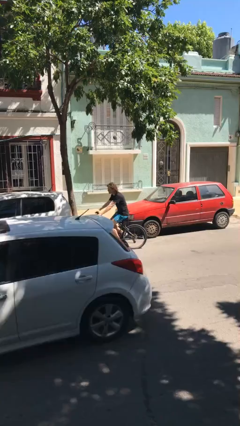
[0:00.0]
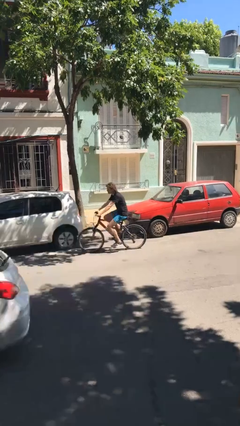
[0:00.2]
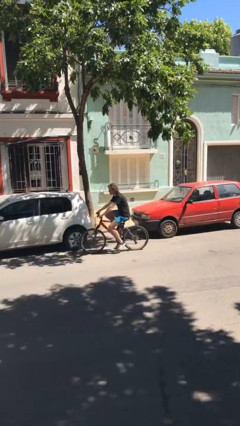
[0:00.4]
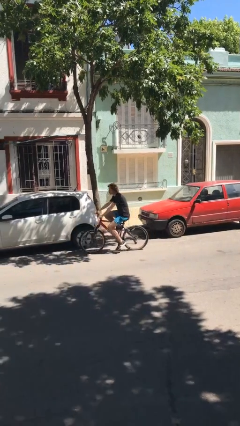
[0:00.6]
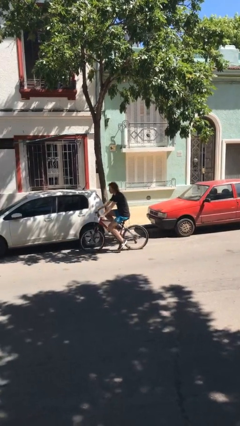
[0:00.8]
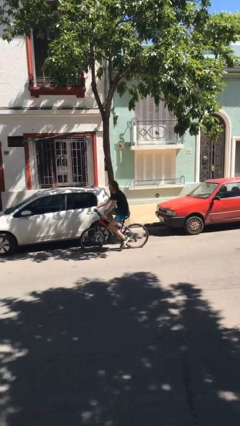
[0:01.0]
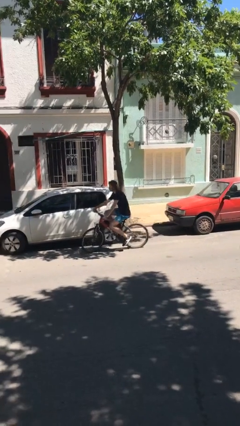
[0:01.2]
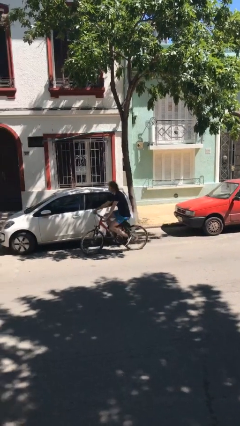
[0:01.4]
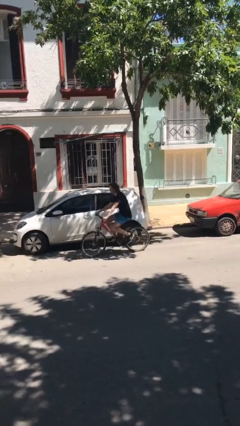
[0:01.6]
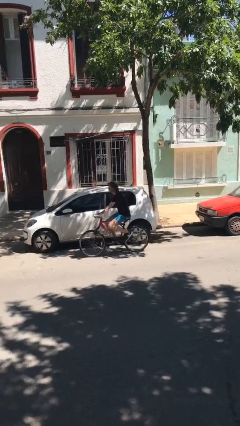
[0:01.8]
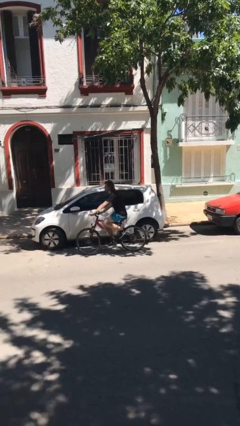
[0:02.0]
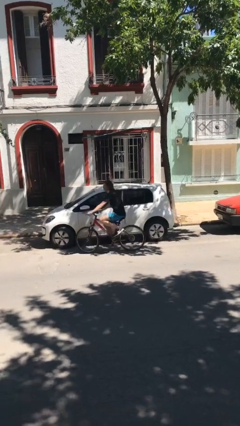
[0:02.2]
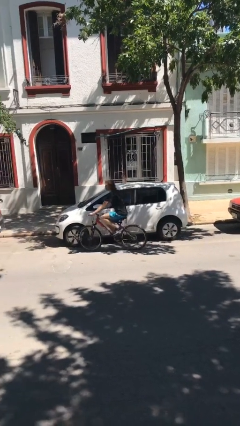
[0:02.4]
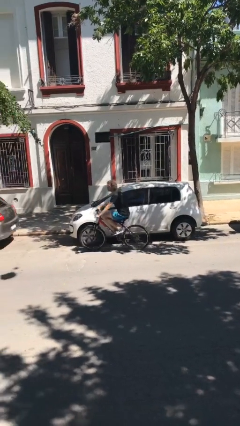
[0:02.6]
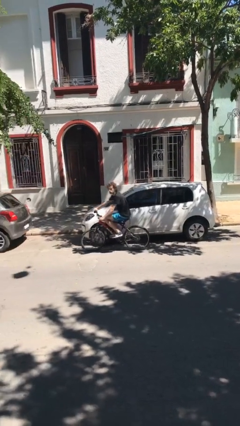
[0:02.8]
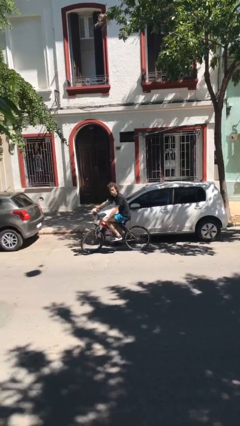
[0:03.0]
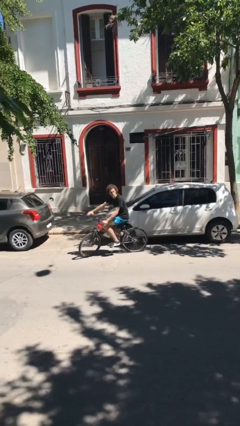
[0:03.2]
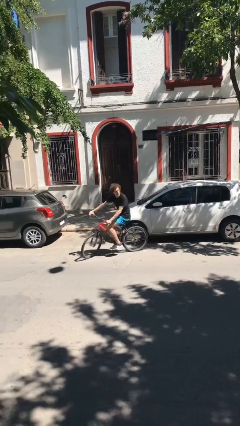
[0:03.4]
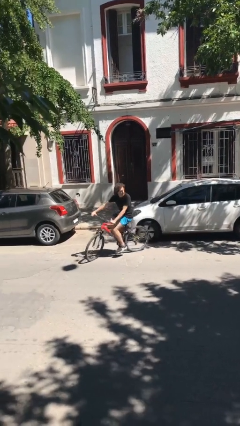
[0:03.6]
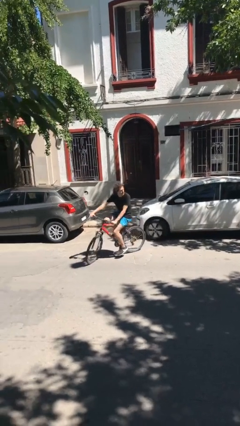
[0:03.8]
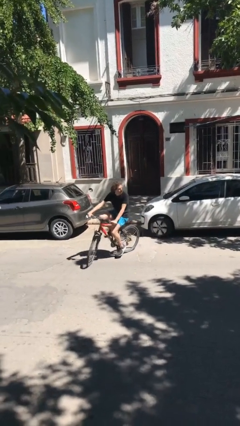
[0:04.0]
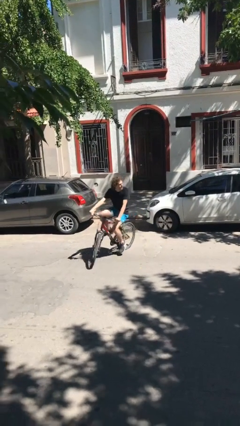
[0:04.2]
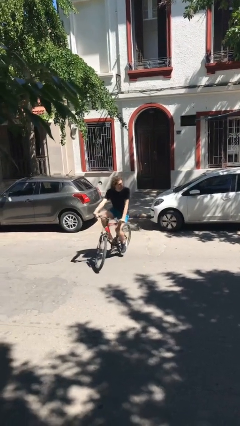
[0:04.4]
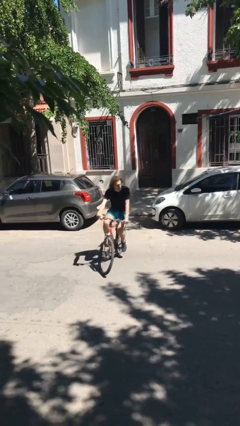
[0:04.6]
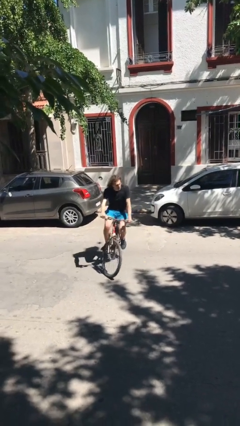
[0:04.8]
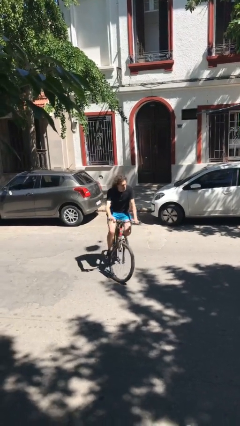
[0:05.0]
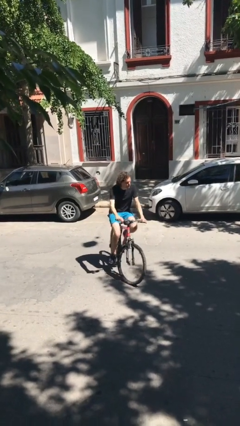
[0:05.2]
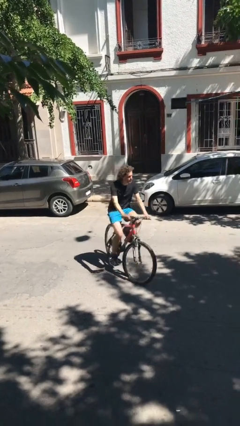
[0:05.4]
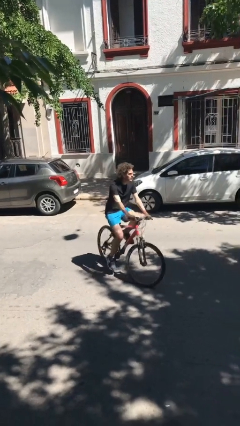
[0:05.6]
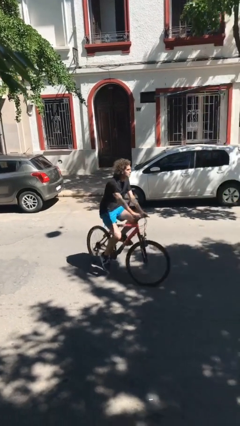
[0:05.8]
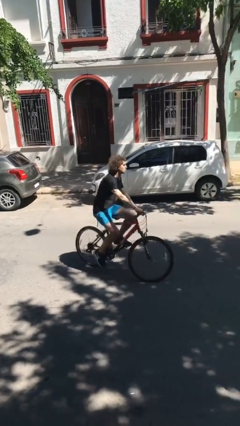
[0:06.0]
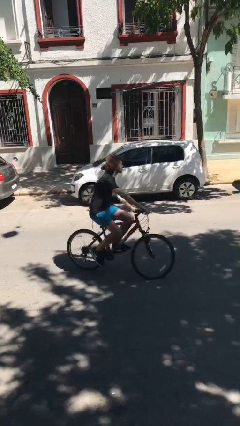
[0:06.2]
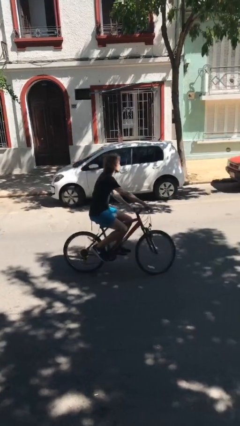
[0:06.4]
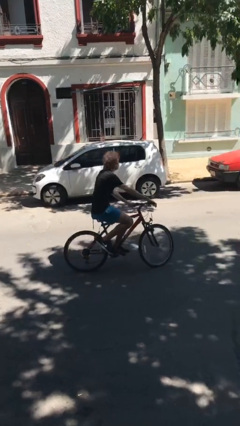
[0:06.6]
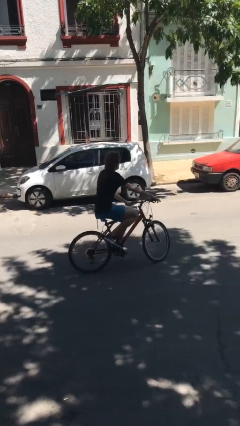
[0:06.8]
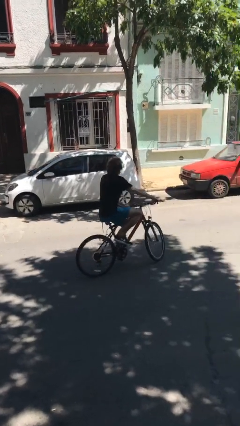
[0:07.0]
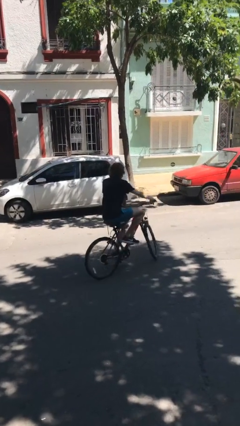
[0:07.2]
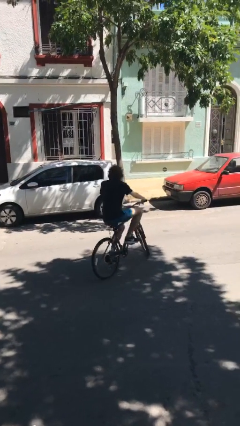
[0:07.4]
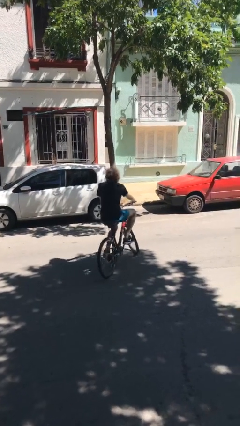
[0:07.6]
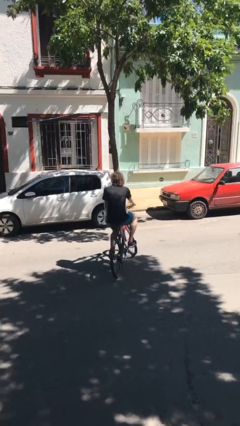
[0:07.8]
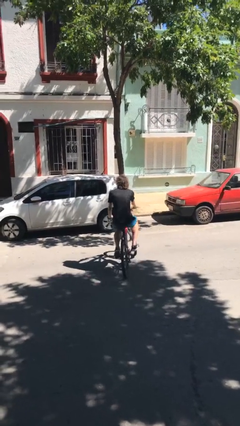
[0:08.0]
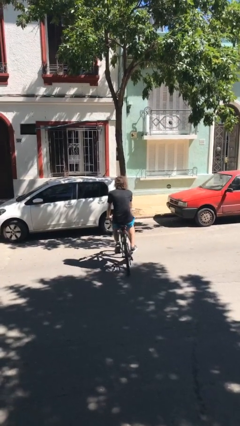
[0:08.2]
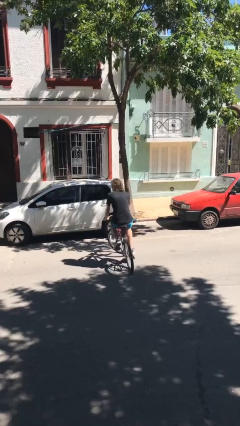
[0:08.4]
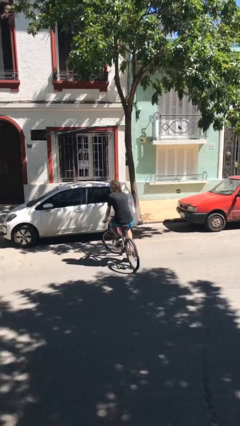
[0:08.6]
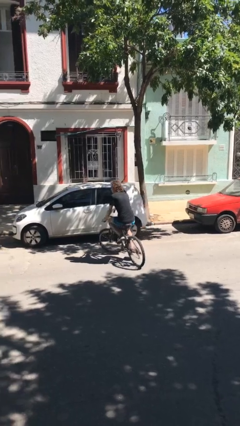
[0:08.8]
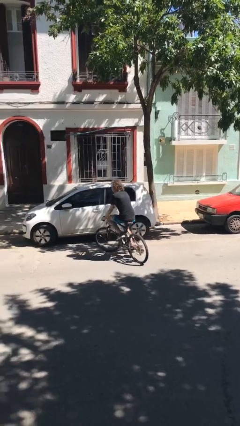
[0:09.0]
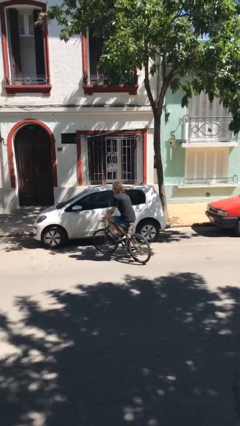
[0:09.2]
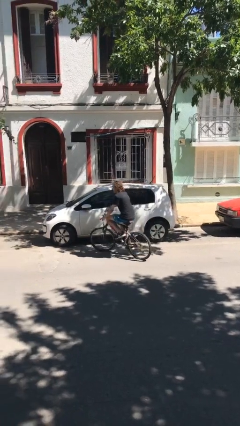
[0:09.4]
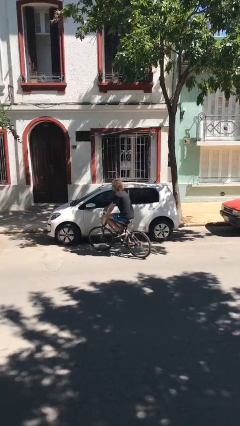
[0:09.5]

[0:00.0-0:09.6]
person rides bicycle

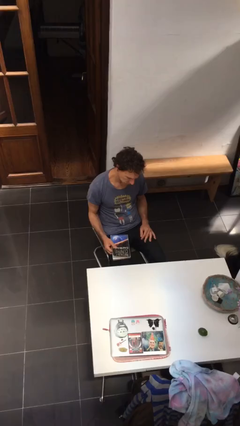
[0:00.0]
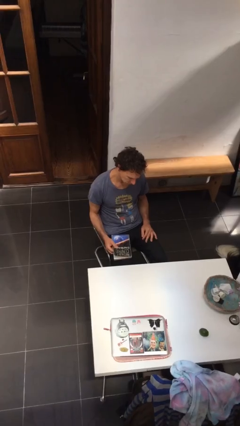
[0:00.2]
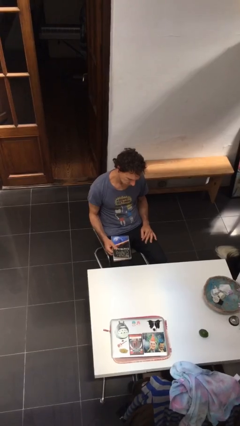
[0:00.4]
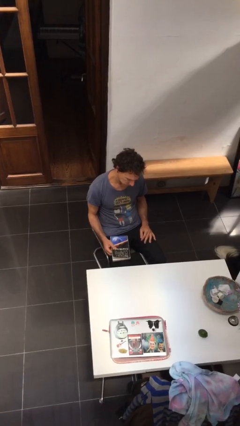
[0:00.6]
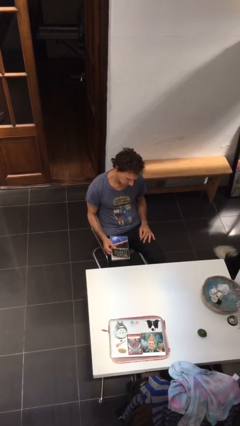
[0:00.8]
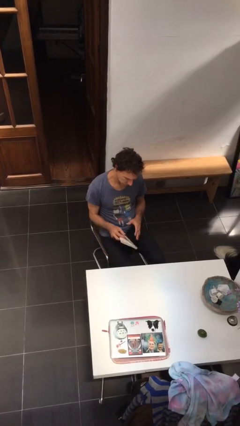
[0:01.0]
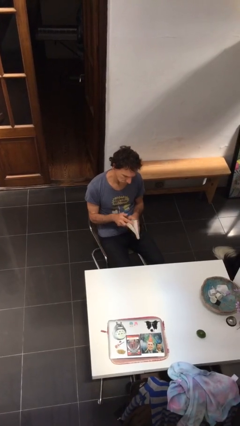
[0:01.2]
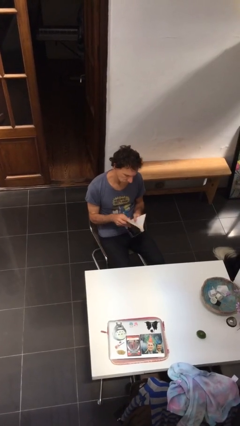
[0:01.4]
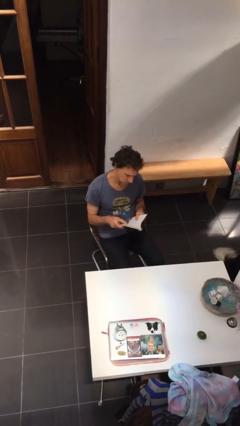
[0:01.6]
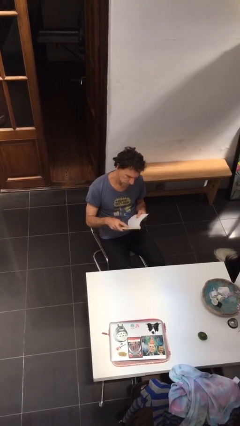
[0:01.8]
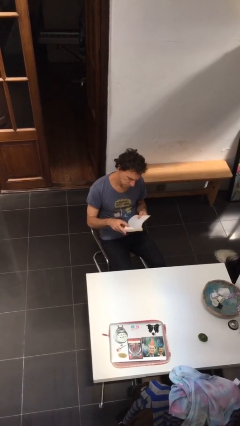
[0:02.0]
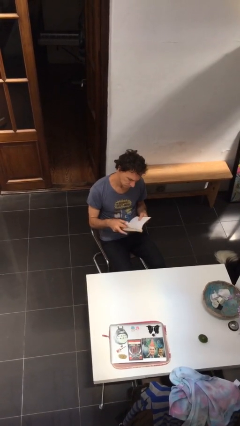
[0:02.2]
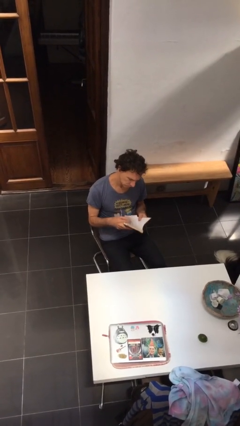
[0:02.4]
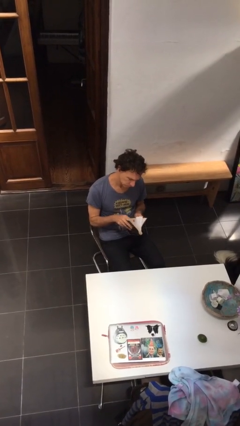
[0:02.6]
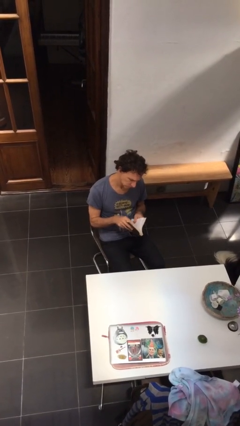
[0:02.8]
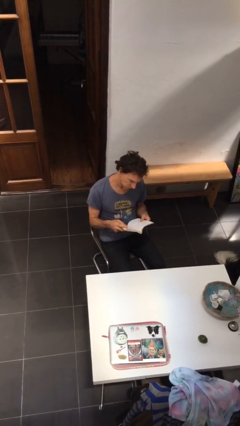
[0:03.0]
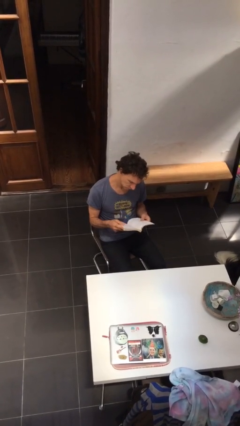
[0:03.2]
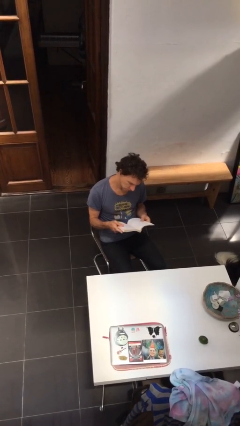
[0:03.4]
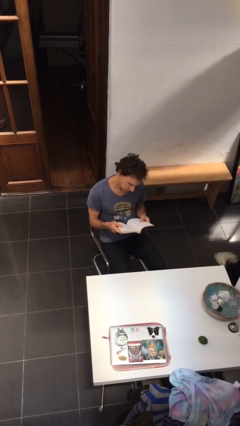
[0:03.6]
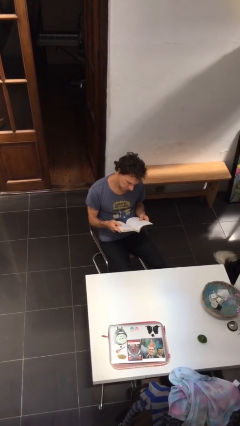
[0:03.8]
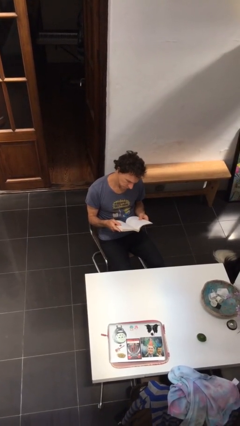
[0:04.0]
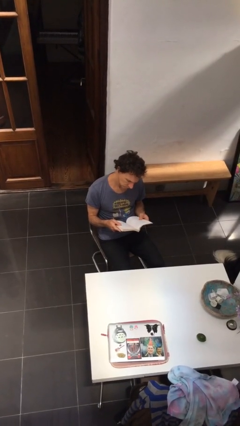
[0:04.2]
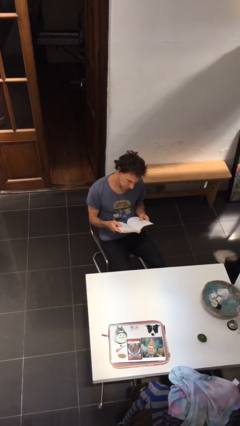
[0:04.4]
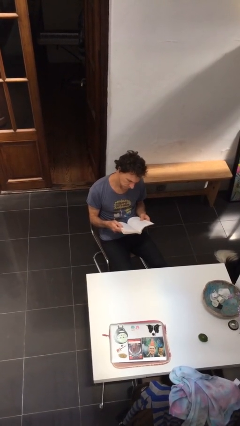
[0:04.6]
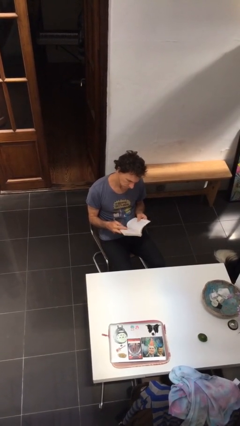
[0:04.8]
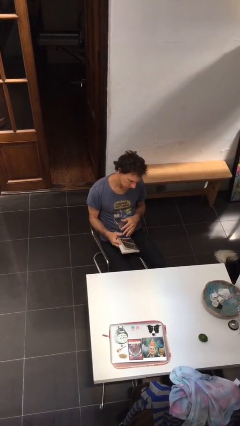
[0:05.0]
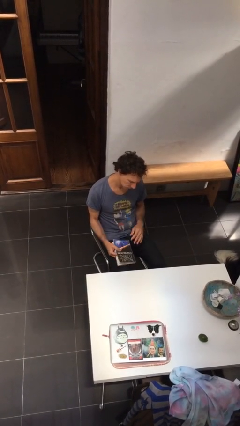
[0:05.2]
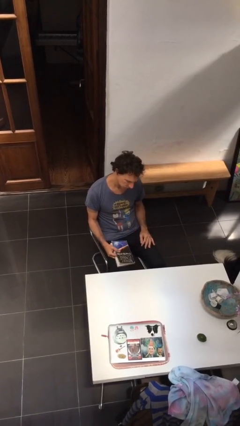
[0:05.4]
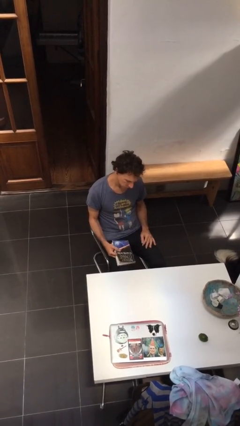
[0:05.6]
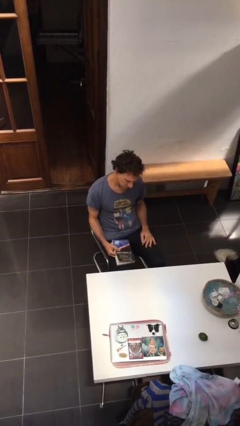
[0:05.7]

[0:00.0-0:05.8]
person reads document

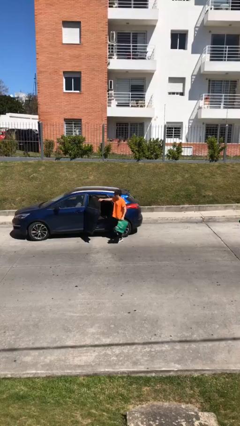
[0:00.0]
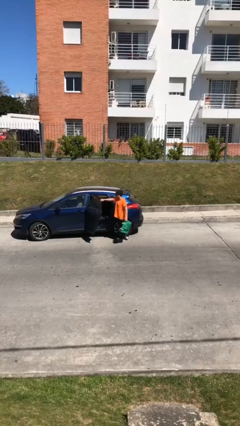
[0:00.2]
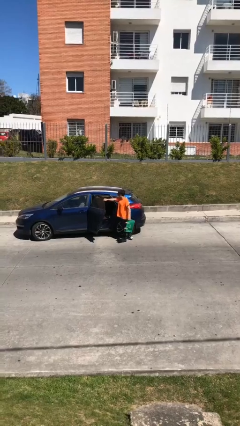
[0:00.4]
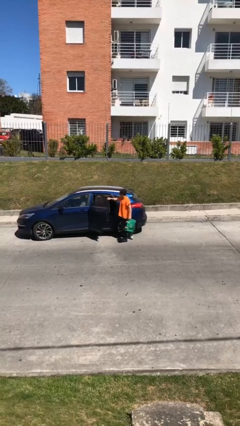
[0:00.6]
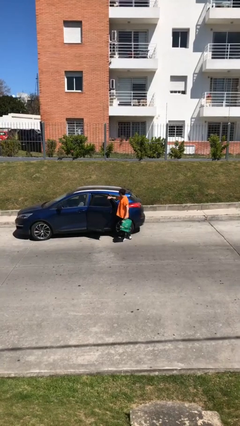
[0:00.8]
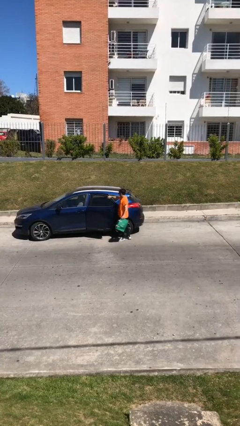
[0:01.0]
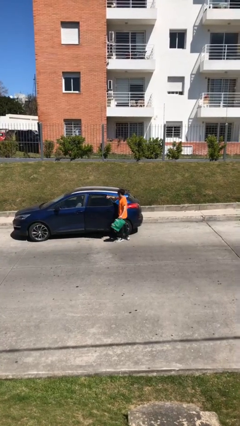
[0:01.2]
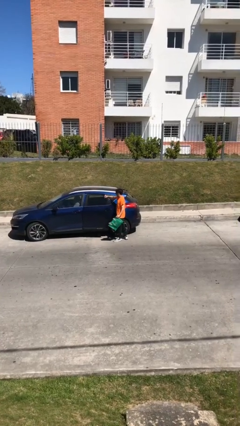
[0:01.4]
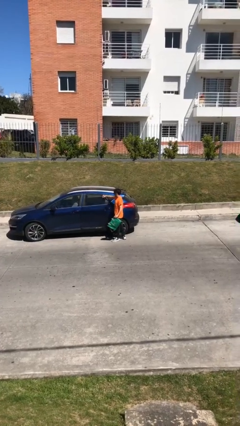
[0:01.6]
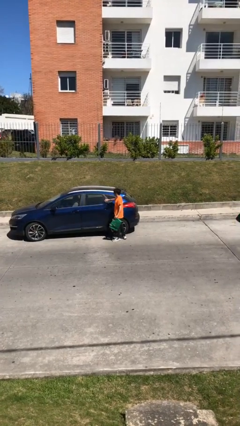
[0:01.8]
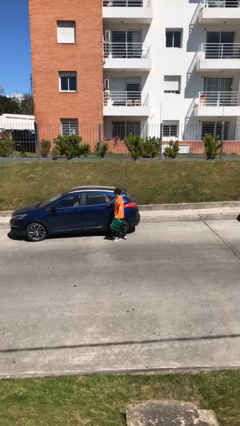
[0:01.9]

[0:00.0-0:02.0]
person closes car door

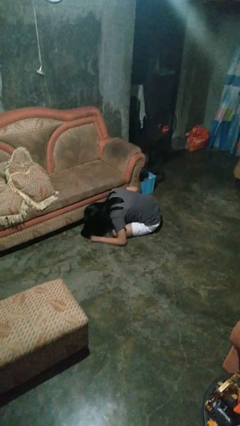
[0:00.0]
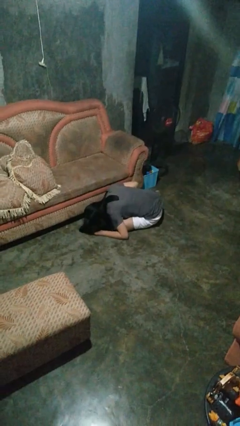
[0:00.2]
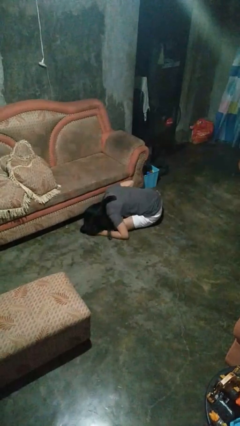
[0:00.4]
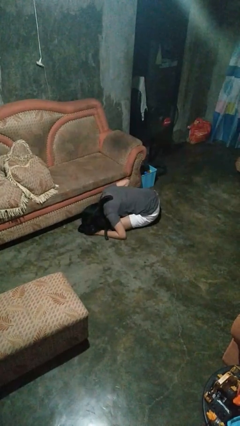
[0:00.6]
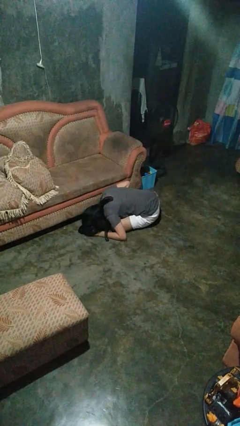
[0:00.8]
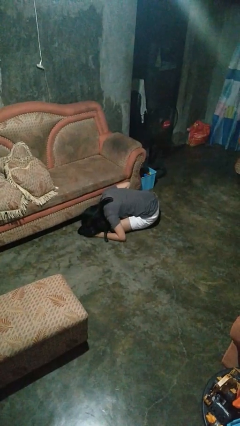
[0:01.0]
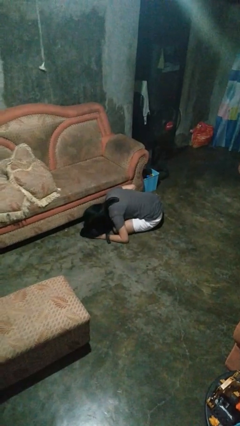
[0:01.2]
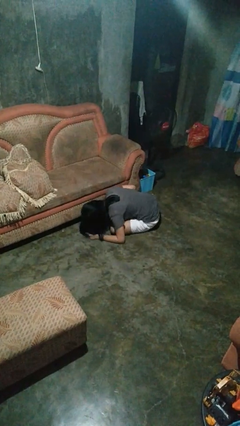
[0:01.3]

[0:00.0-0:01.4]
person searches under couch
